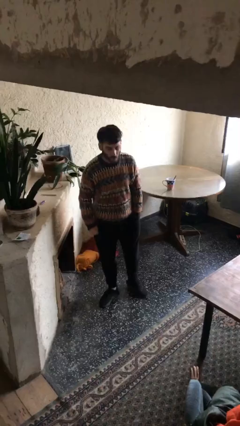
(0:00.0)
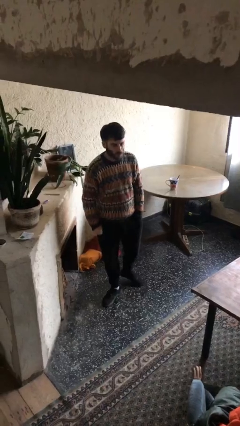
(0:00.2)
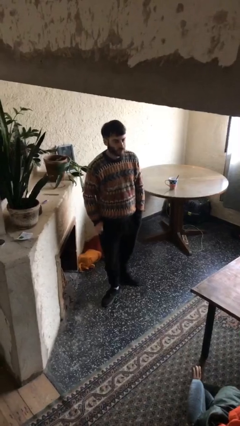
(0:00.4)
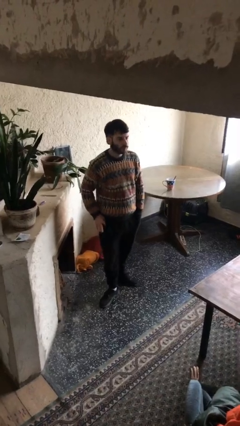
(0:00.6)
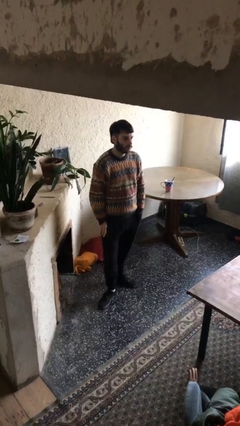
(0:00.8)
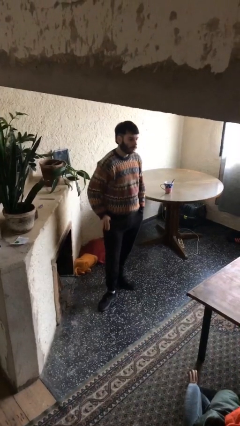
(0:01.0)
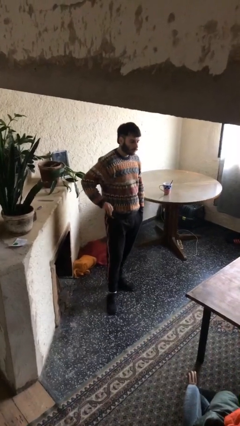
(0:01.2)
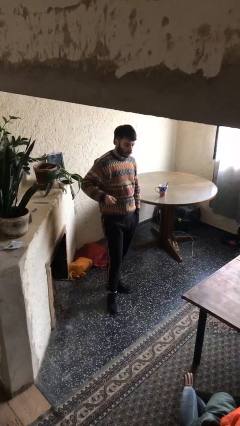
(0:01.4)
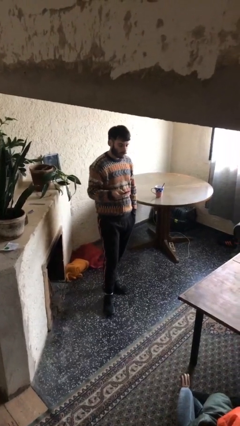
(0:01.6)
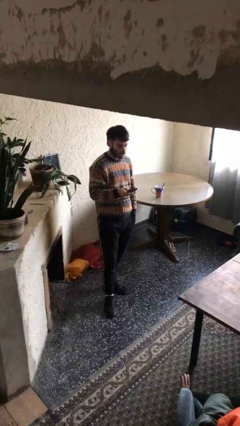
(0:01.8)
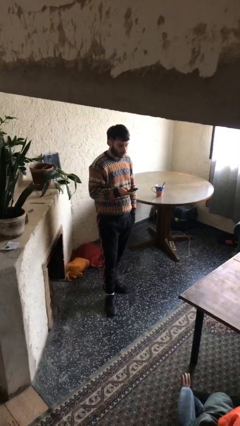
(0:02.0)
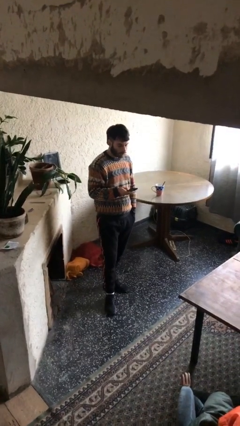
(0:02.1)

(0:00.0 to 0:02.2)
person takes phone from pocket

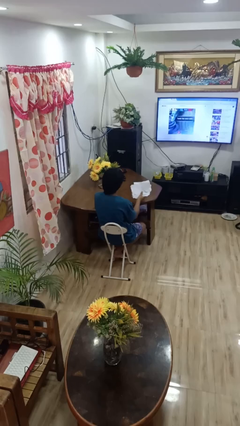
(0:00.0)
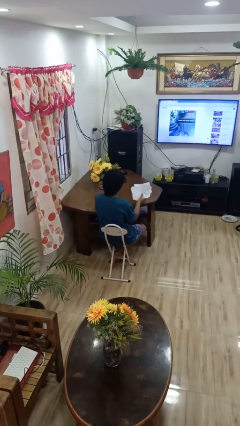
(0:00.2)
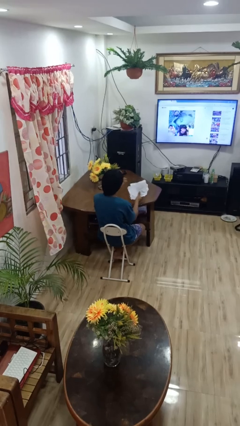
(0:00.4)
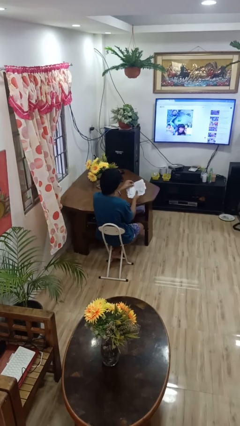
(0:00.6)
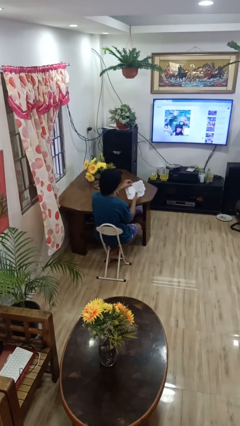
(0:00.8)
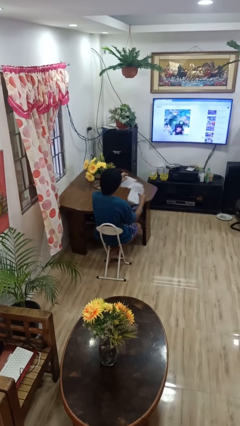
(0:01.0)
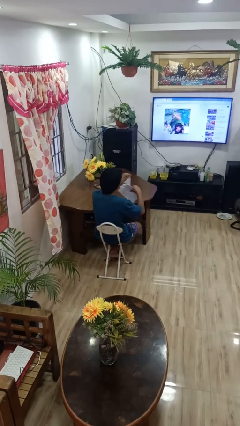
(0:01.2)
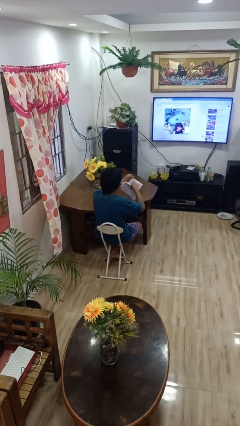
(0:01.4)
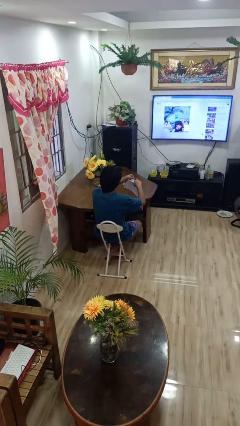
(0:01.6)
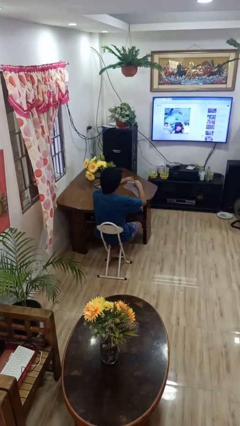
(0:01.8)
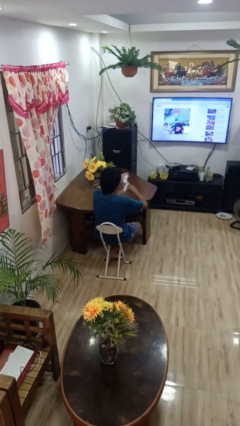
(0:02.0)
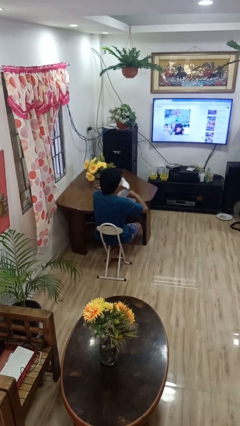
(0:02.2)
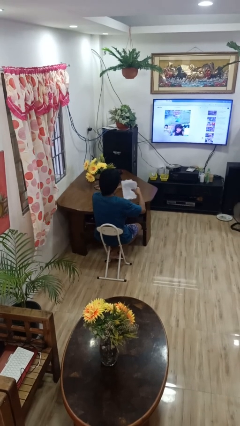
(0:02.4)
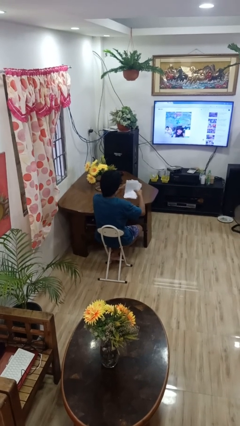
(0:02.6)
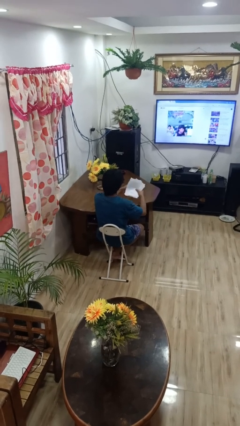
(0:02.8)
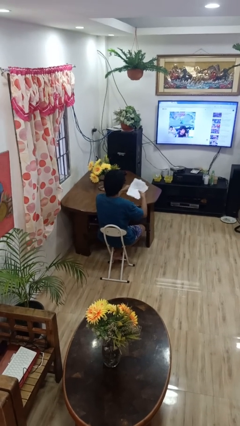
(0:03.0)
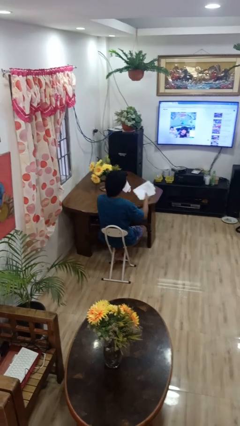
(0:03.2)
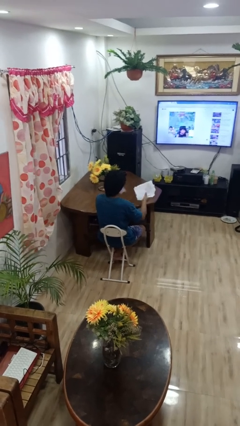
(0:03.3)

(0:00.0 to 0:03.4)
person tears paper

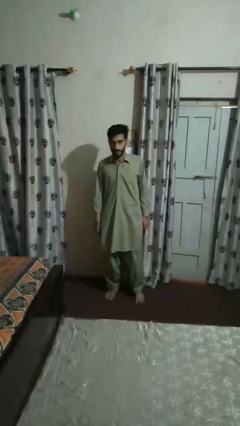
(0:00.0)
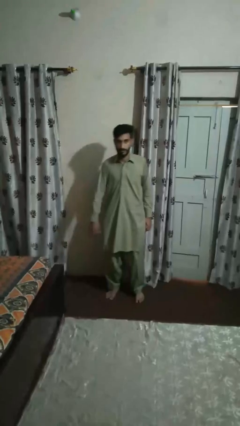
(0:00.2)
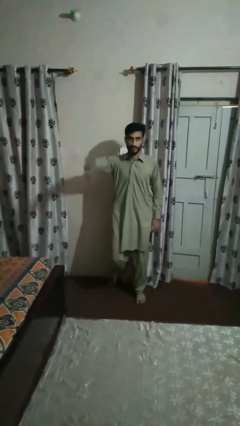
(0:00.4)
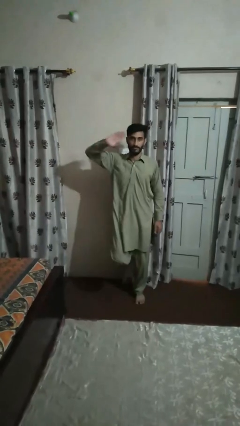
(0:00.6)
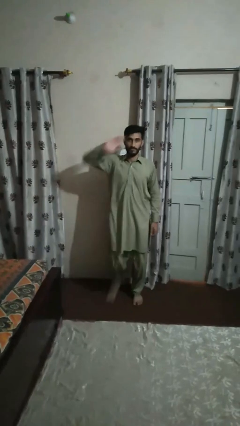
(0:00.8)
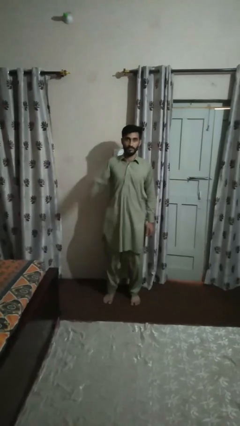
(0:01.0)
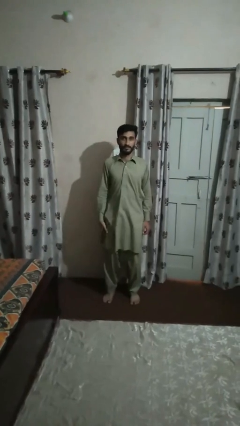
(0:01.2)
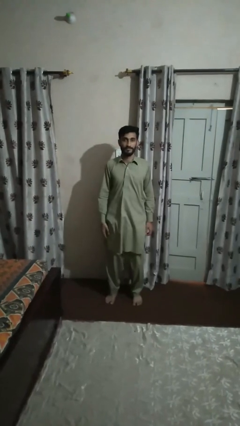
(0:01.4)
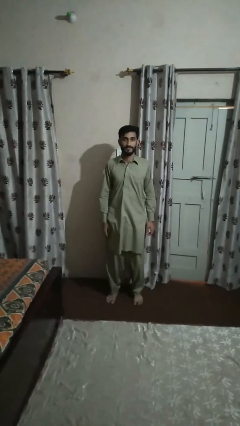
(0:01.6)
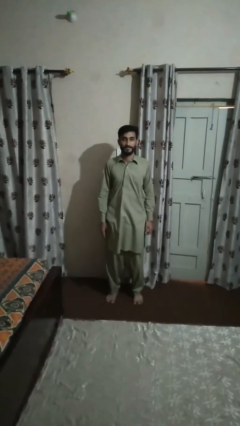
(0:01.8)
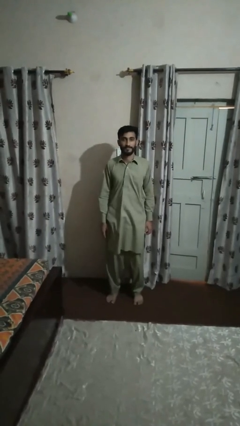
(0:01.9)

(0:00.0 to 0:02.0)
person salutes

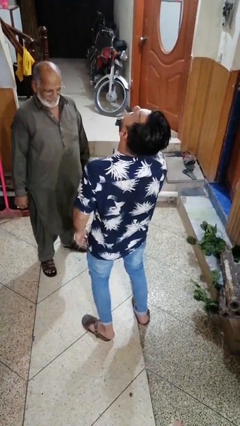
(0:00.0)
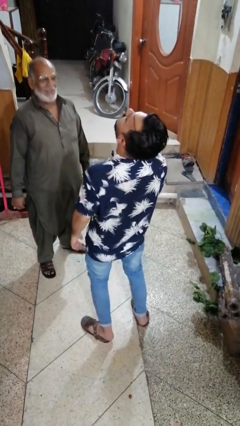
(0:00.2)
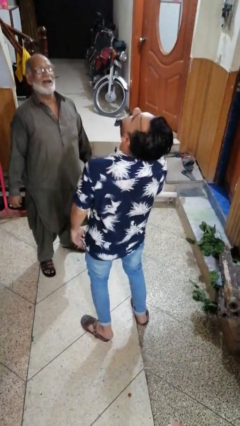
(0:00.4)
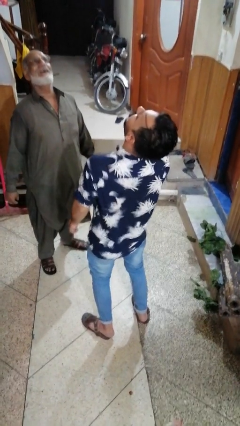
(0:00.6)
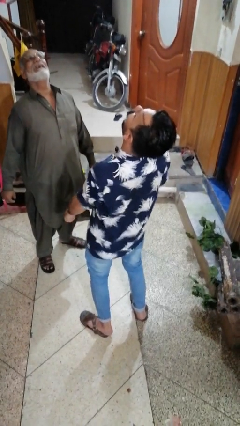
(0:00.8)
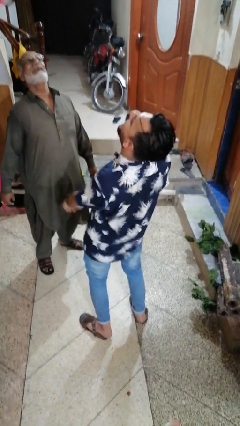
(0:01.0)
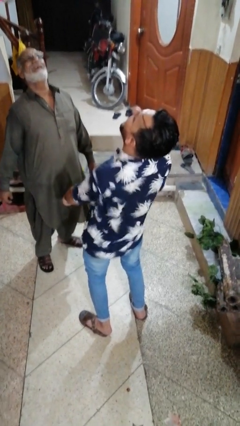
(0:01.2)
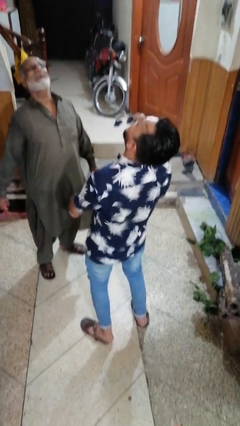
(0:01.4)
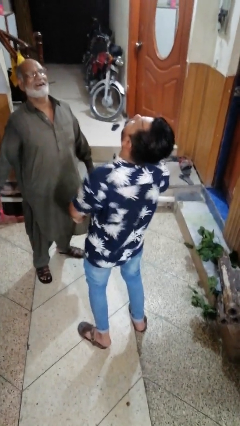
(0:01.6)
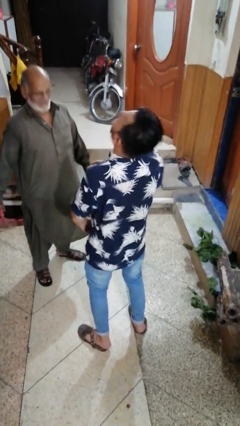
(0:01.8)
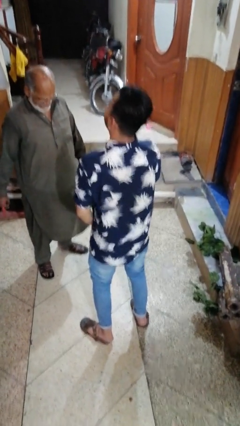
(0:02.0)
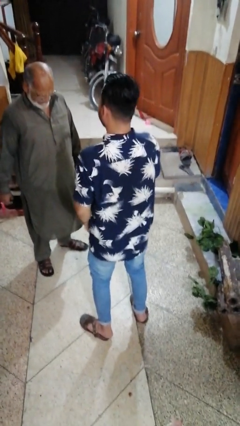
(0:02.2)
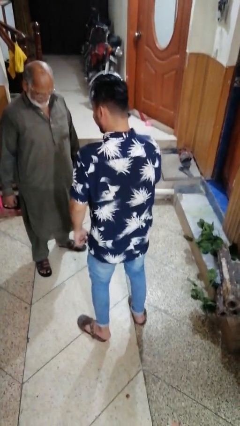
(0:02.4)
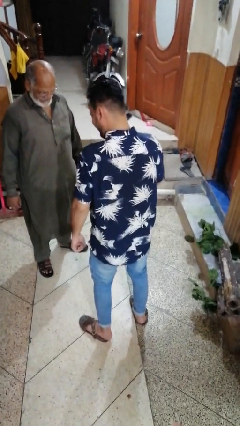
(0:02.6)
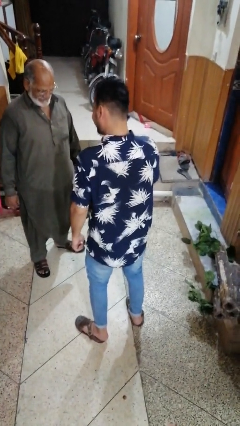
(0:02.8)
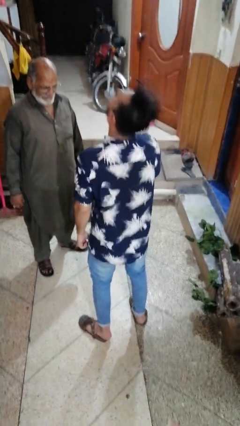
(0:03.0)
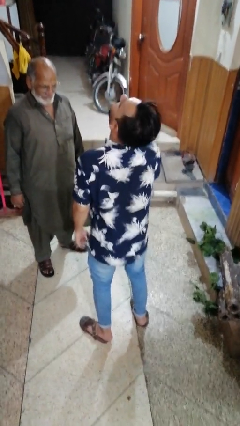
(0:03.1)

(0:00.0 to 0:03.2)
person laughs with person

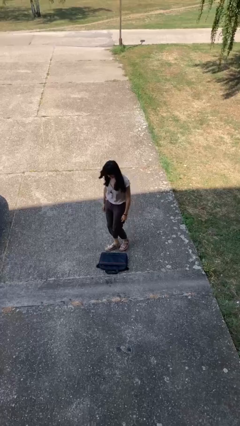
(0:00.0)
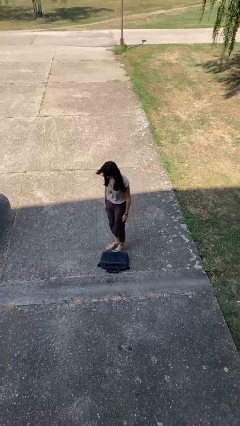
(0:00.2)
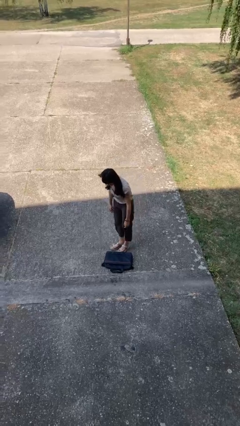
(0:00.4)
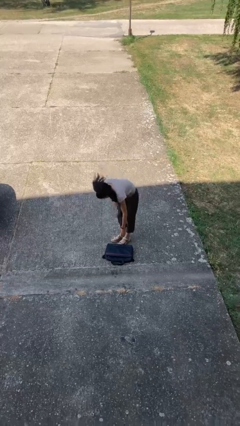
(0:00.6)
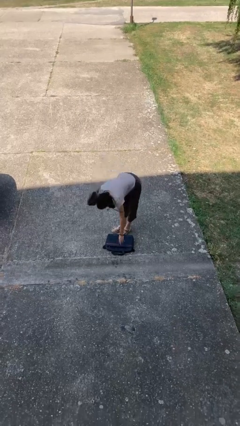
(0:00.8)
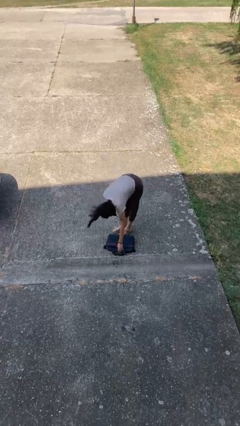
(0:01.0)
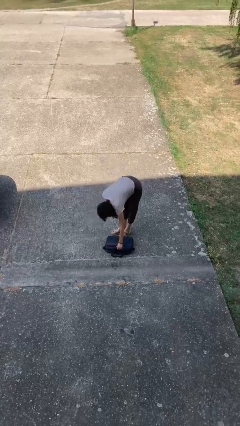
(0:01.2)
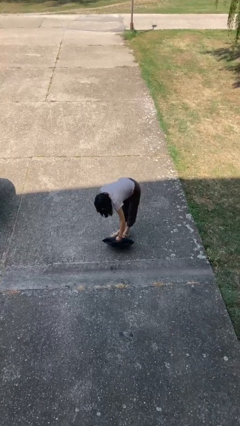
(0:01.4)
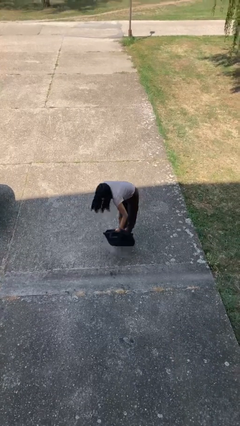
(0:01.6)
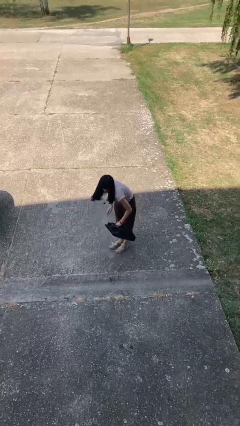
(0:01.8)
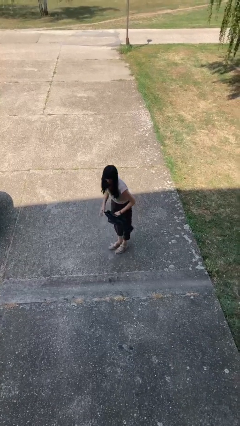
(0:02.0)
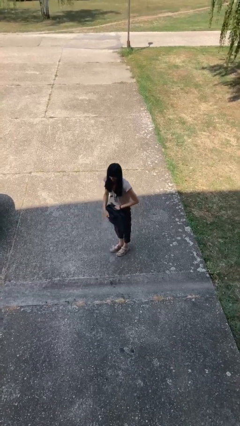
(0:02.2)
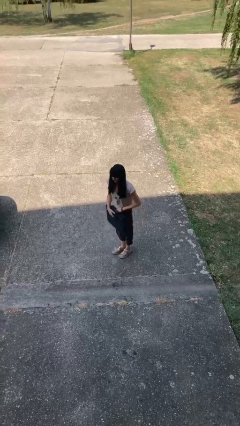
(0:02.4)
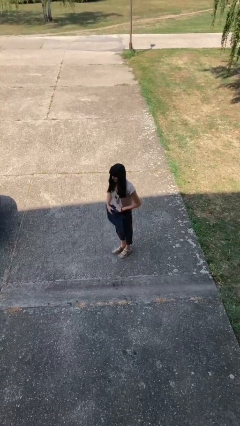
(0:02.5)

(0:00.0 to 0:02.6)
person picks up object from floor

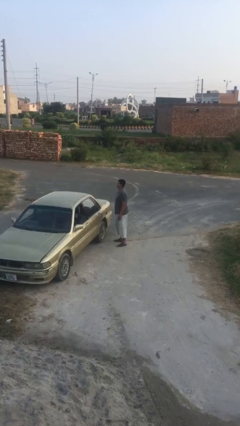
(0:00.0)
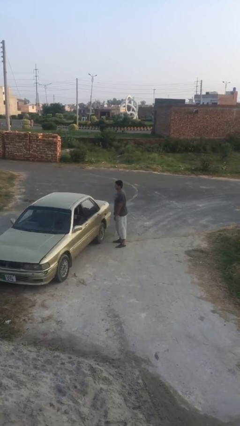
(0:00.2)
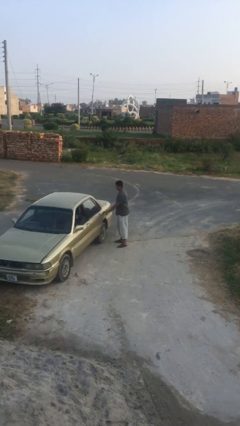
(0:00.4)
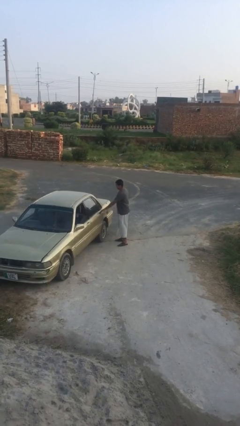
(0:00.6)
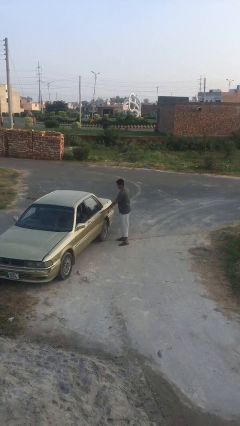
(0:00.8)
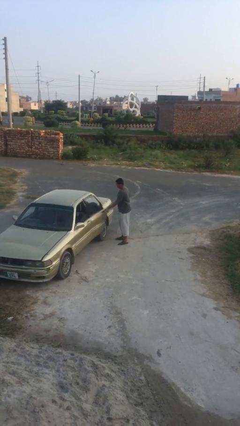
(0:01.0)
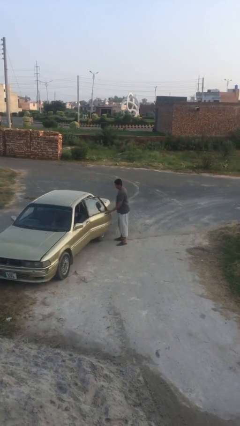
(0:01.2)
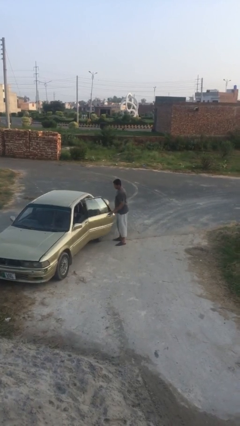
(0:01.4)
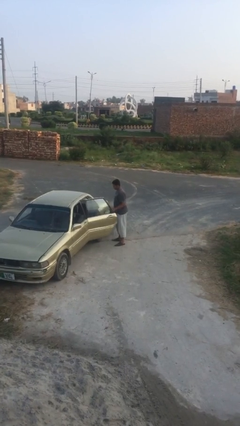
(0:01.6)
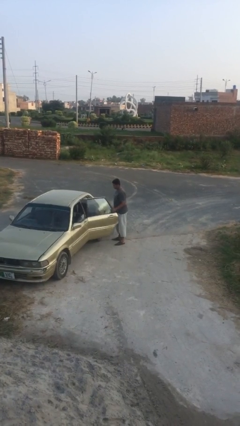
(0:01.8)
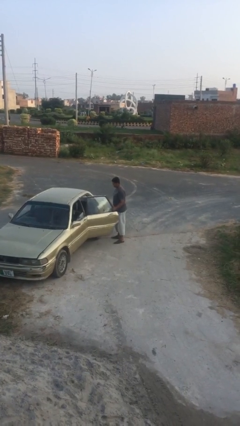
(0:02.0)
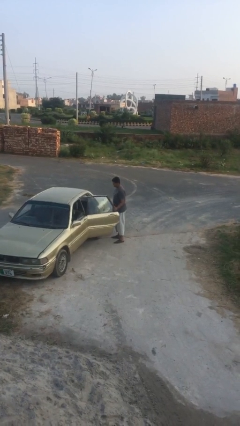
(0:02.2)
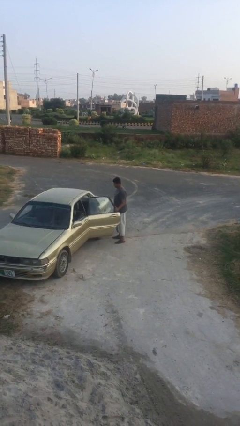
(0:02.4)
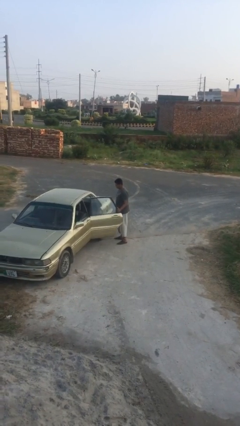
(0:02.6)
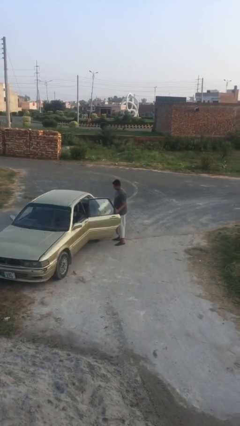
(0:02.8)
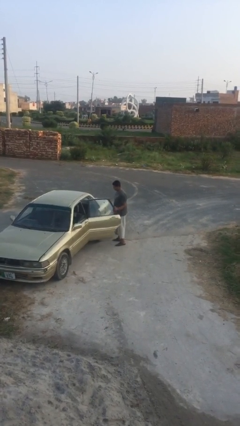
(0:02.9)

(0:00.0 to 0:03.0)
person opens car door

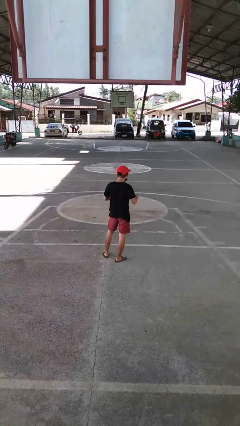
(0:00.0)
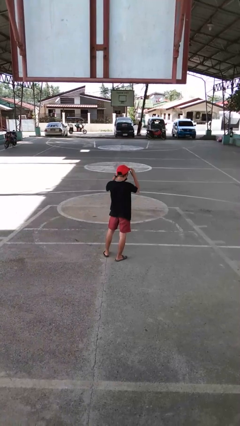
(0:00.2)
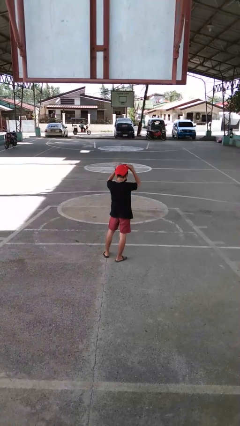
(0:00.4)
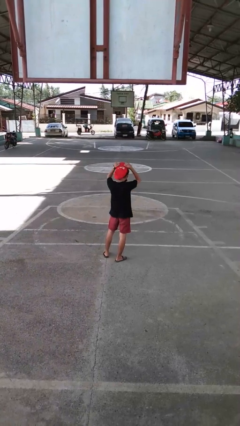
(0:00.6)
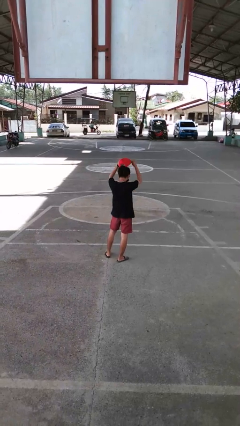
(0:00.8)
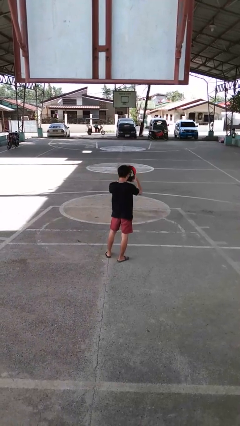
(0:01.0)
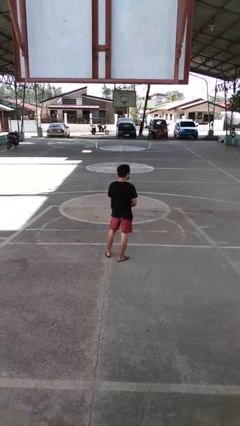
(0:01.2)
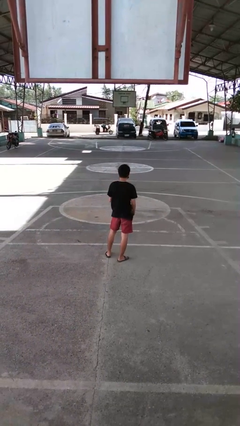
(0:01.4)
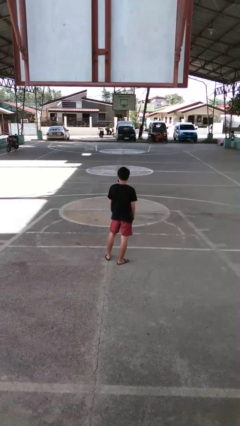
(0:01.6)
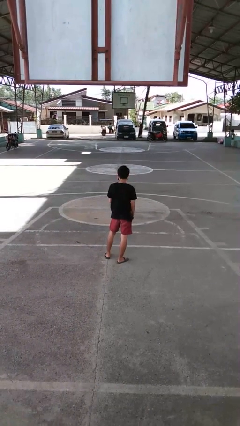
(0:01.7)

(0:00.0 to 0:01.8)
person takes off hat
